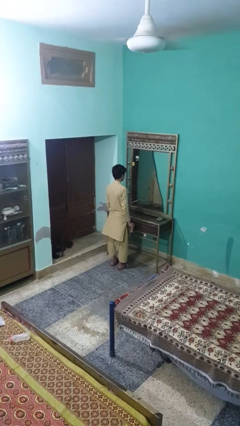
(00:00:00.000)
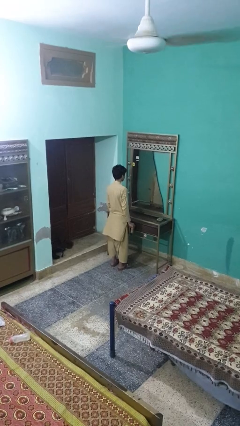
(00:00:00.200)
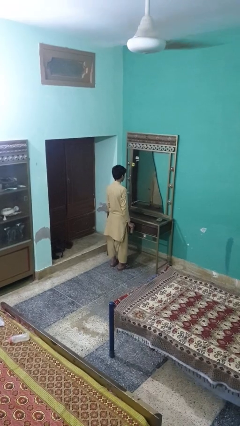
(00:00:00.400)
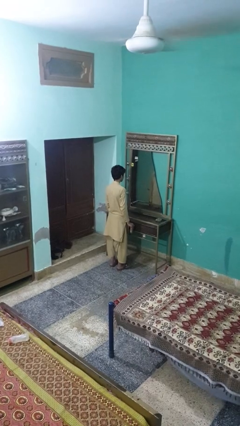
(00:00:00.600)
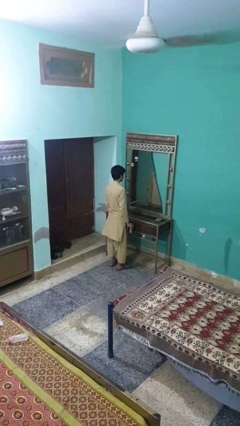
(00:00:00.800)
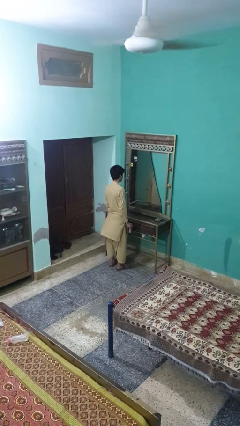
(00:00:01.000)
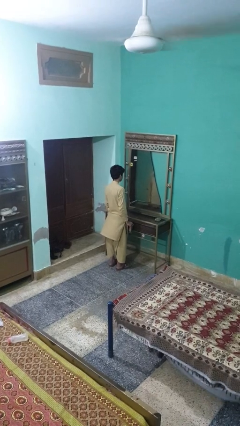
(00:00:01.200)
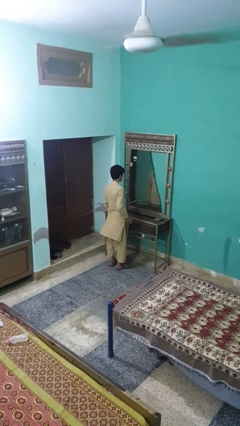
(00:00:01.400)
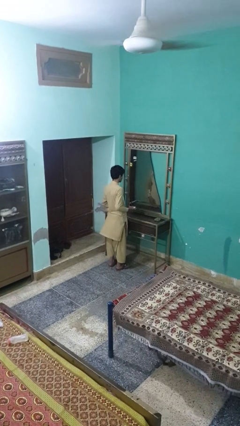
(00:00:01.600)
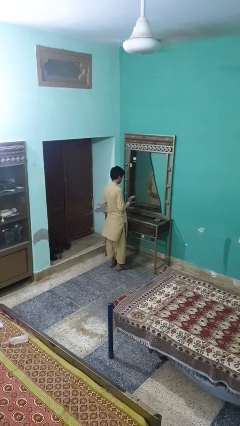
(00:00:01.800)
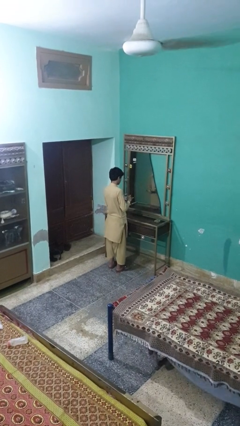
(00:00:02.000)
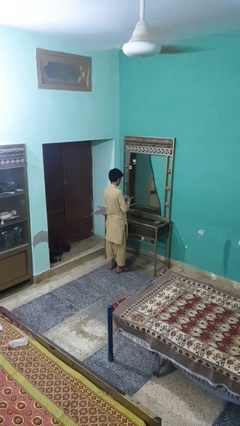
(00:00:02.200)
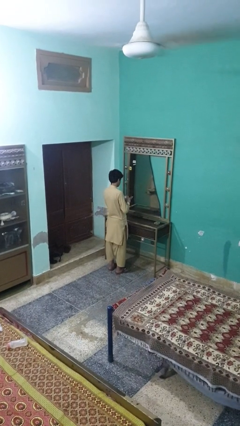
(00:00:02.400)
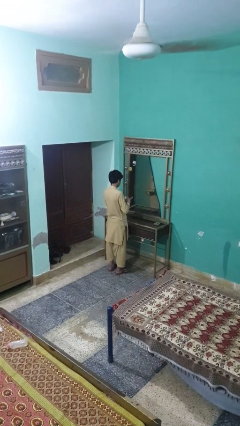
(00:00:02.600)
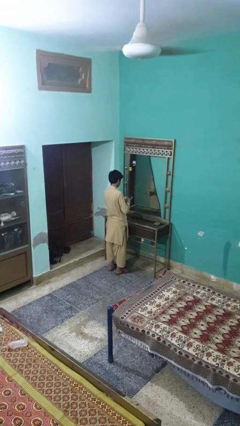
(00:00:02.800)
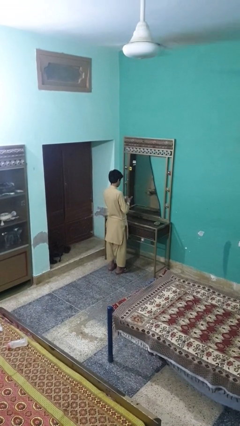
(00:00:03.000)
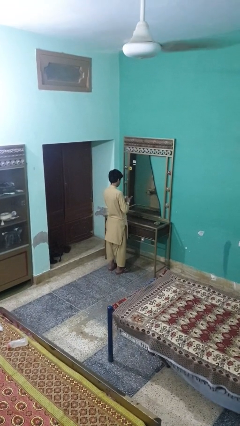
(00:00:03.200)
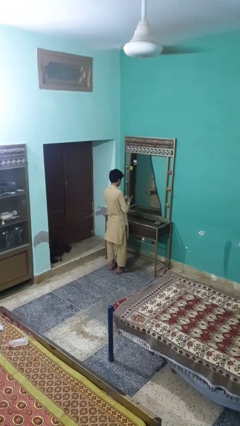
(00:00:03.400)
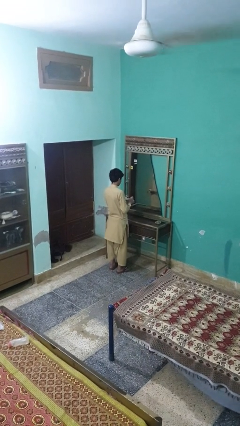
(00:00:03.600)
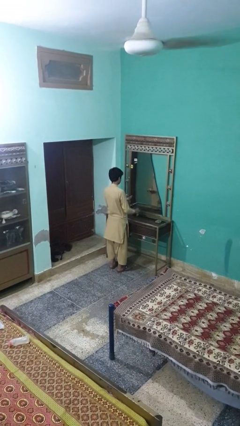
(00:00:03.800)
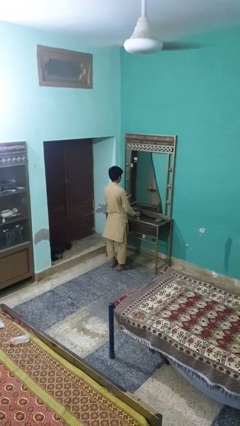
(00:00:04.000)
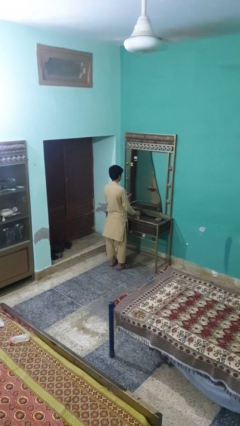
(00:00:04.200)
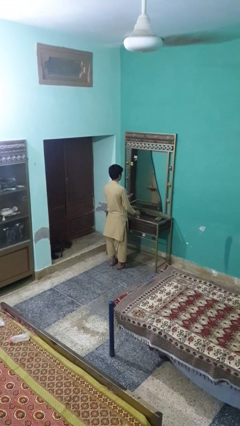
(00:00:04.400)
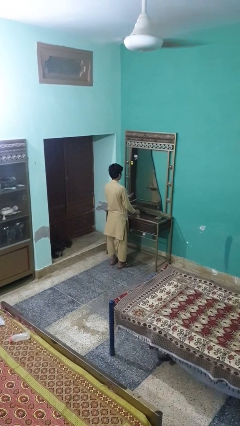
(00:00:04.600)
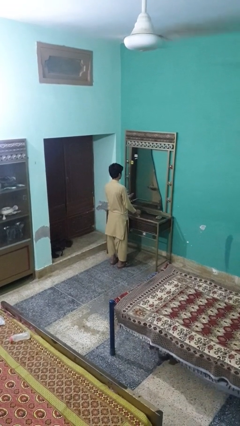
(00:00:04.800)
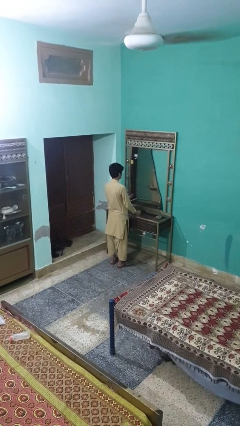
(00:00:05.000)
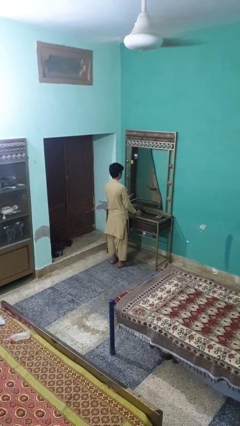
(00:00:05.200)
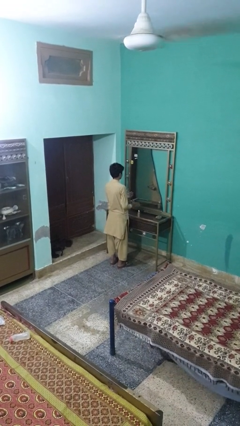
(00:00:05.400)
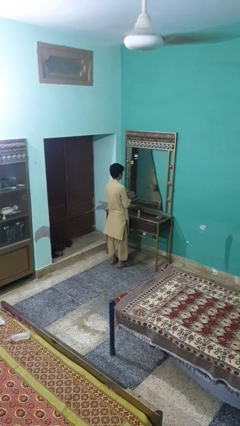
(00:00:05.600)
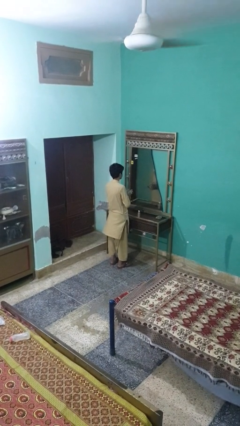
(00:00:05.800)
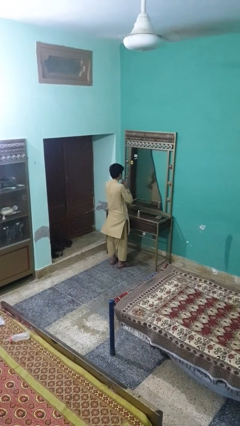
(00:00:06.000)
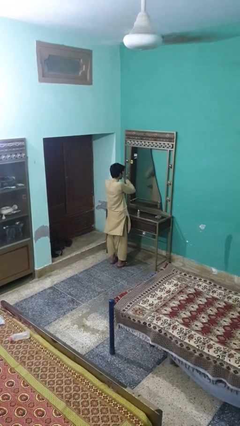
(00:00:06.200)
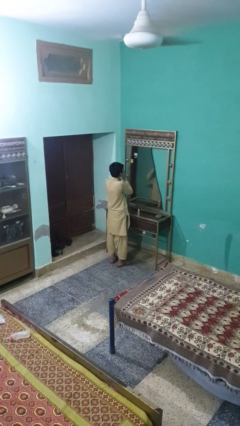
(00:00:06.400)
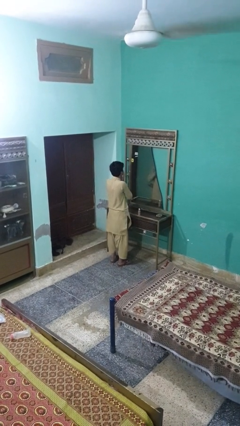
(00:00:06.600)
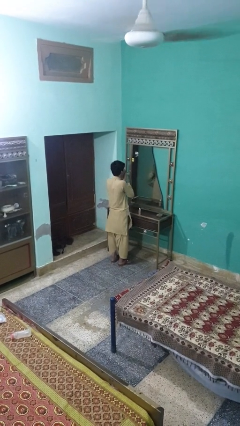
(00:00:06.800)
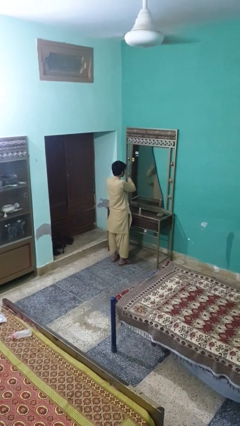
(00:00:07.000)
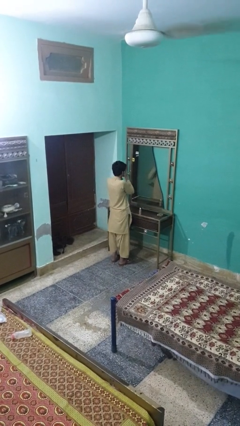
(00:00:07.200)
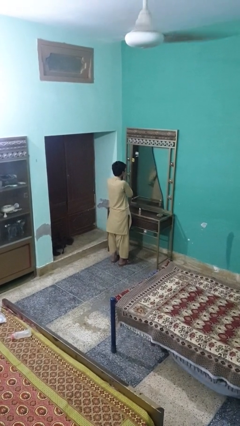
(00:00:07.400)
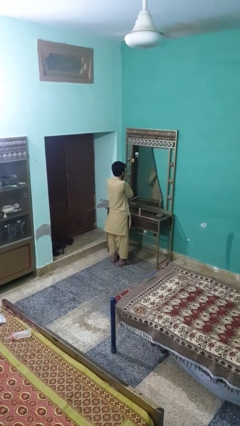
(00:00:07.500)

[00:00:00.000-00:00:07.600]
person applies foundation makeup

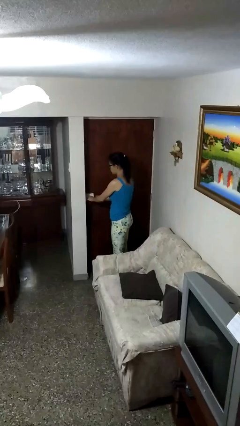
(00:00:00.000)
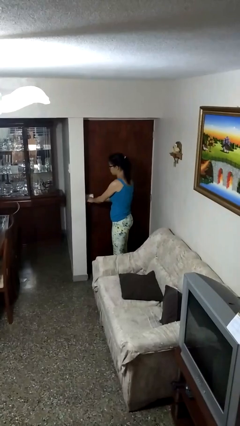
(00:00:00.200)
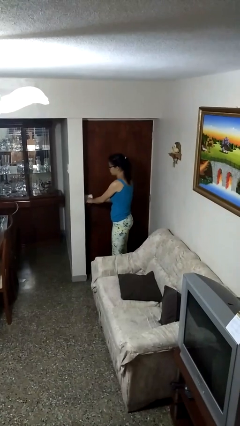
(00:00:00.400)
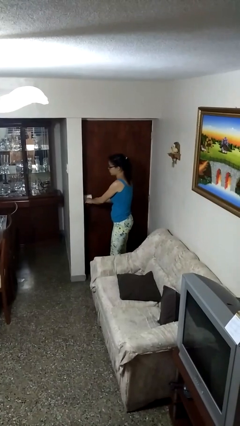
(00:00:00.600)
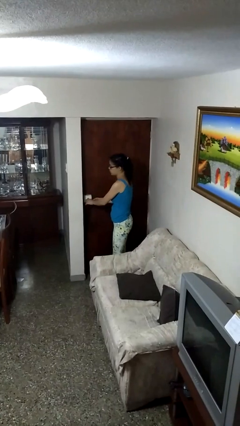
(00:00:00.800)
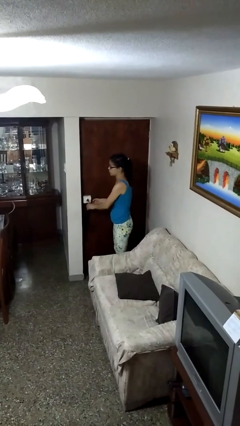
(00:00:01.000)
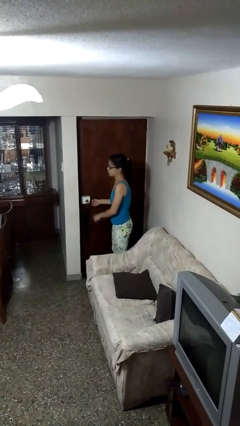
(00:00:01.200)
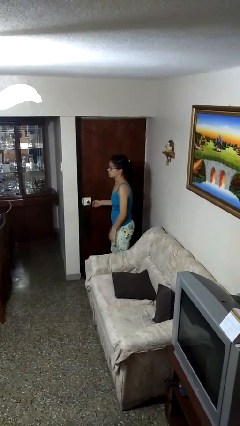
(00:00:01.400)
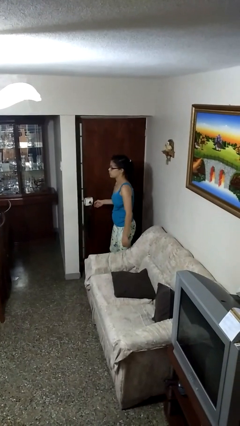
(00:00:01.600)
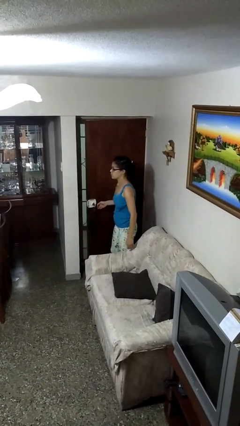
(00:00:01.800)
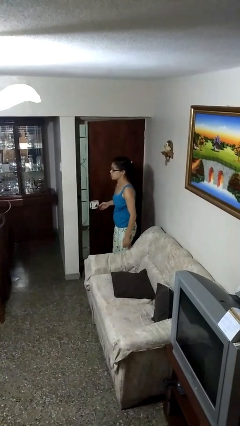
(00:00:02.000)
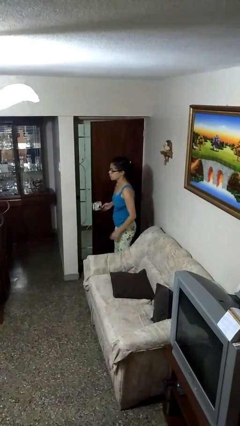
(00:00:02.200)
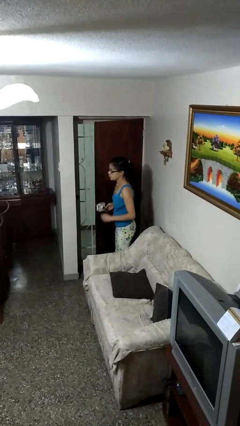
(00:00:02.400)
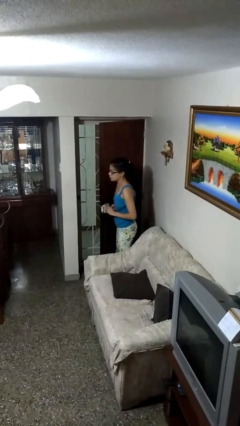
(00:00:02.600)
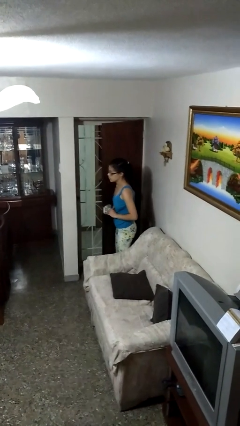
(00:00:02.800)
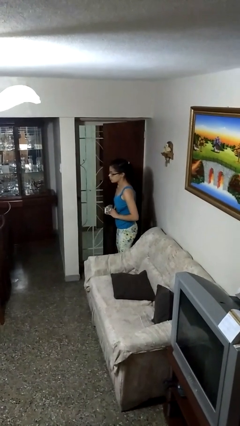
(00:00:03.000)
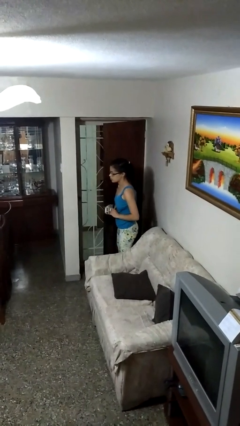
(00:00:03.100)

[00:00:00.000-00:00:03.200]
person opens facility door

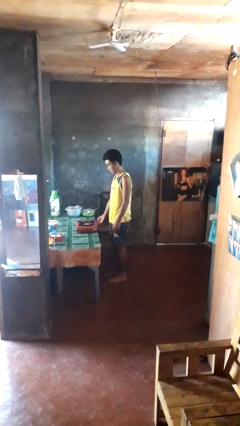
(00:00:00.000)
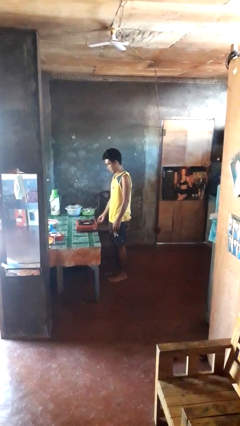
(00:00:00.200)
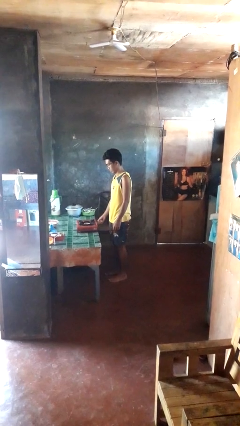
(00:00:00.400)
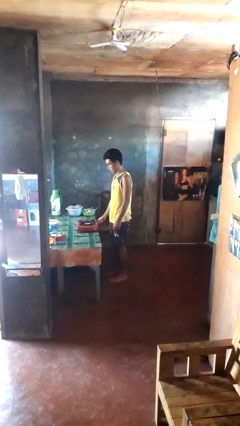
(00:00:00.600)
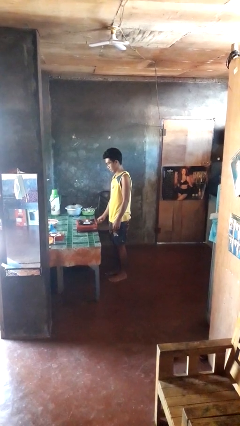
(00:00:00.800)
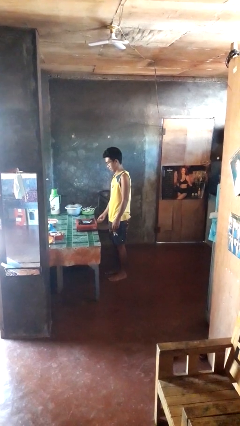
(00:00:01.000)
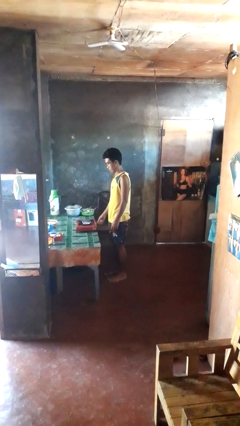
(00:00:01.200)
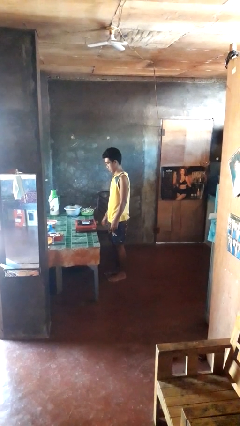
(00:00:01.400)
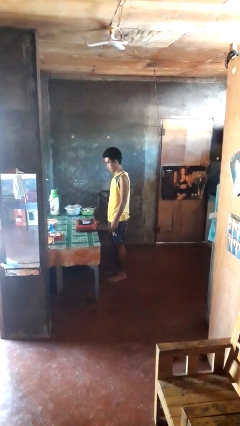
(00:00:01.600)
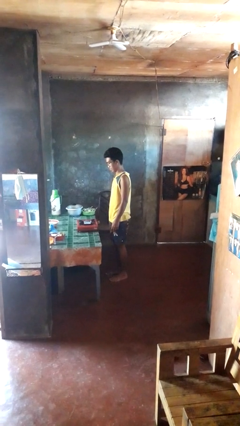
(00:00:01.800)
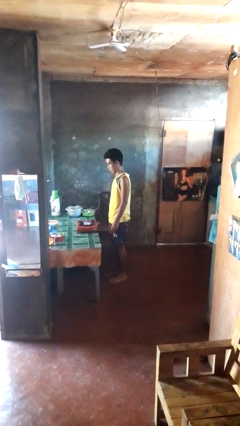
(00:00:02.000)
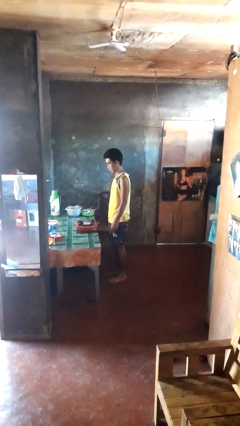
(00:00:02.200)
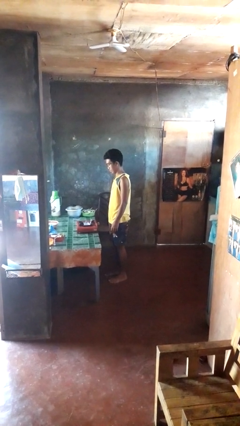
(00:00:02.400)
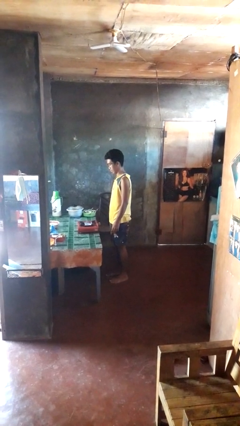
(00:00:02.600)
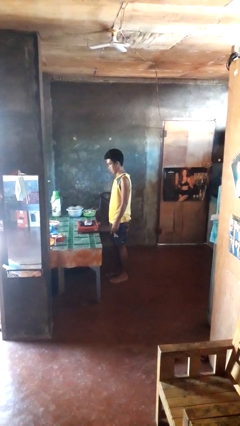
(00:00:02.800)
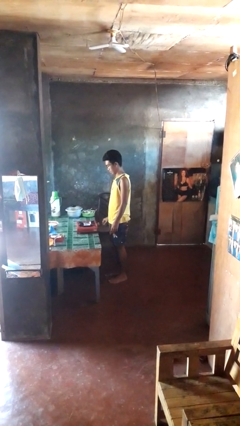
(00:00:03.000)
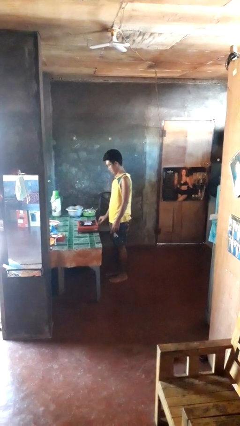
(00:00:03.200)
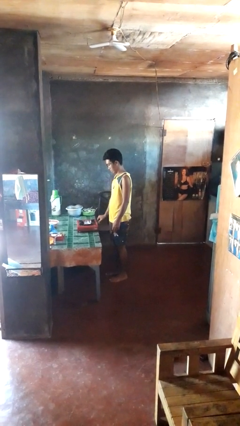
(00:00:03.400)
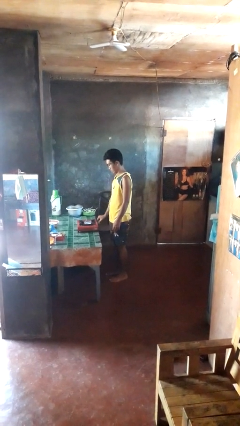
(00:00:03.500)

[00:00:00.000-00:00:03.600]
person turns on stovetop

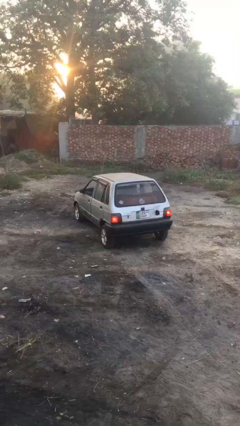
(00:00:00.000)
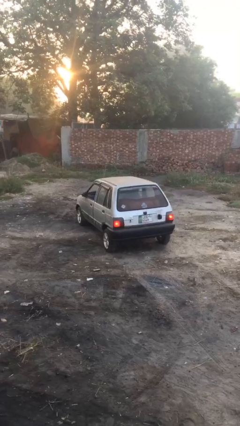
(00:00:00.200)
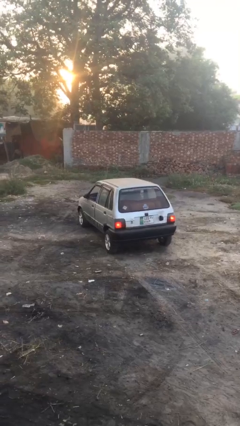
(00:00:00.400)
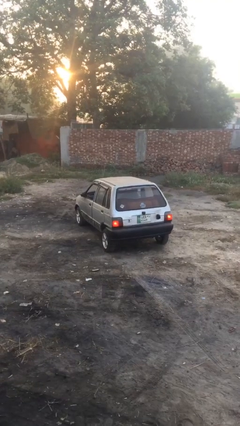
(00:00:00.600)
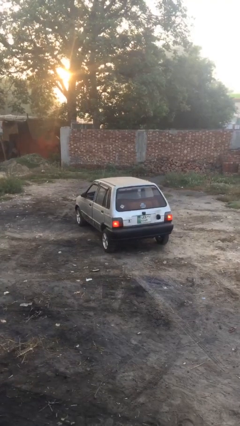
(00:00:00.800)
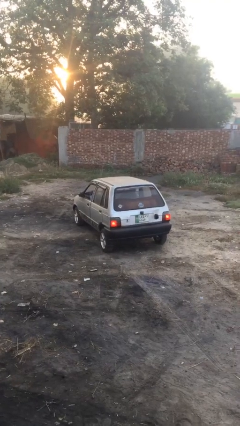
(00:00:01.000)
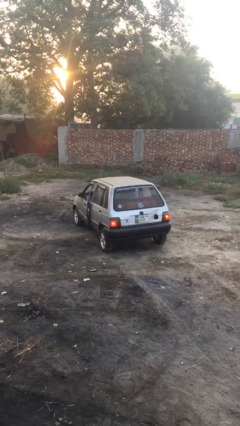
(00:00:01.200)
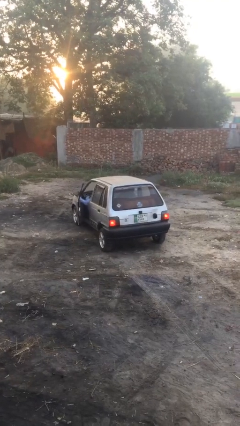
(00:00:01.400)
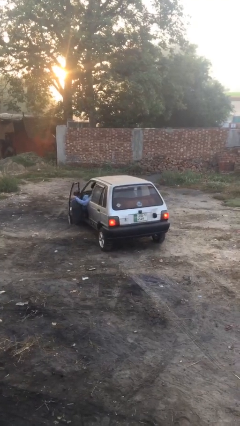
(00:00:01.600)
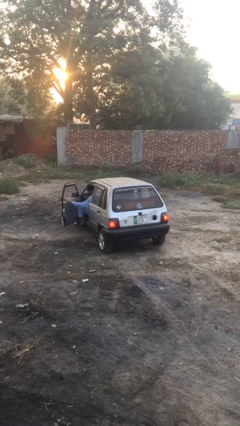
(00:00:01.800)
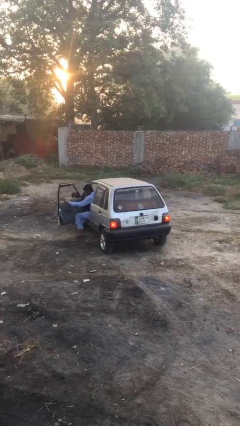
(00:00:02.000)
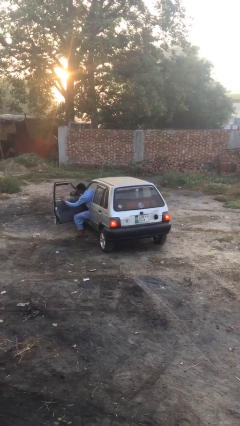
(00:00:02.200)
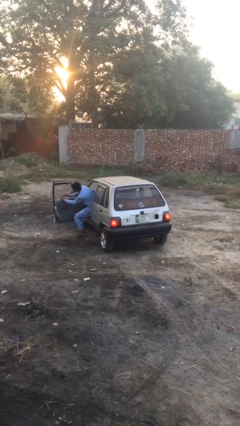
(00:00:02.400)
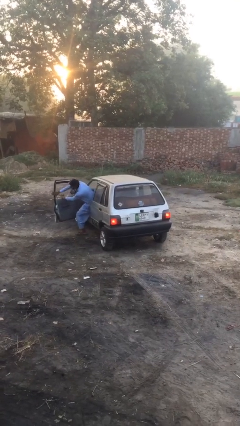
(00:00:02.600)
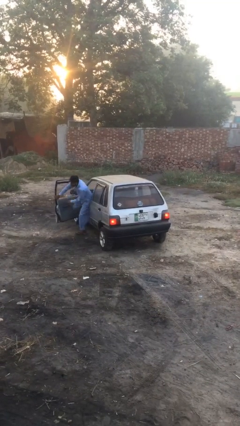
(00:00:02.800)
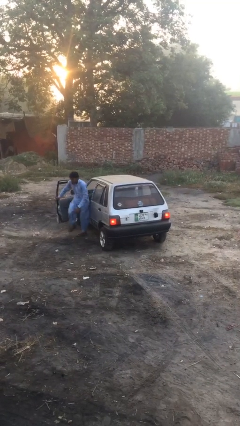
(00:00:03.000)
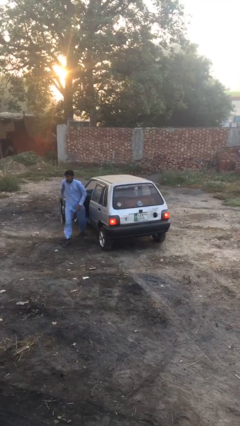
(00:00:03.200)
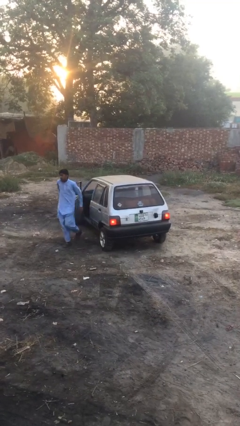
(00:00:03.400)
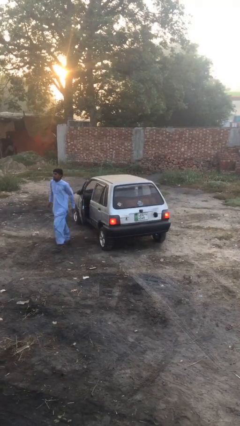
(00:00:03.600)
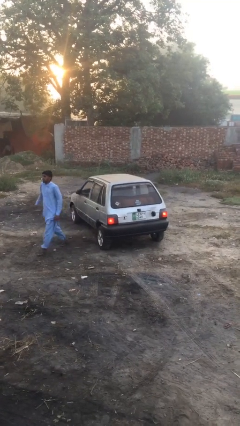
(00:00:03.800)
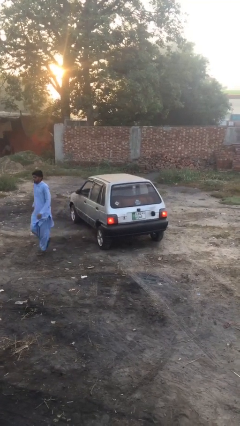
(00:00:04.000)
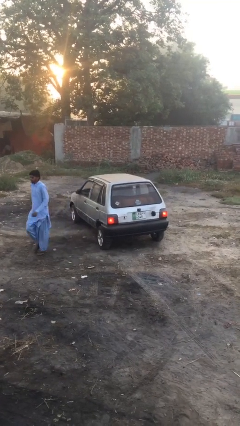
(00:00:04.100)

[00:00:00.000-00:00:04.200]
car drops off person
